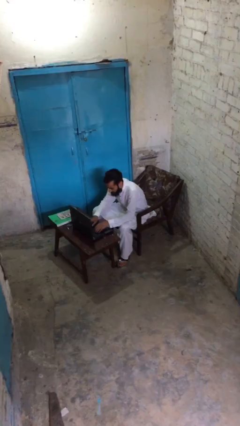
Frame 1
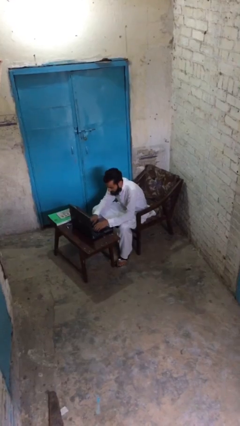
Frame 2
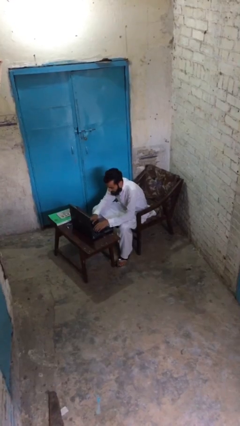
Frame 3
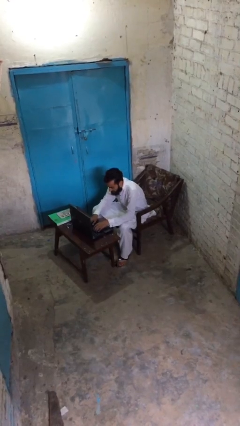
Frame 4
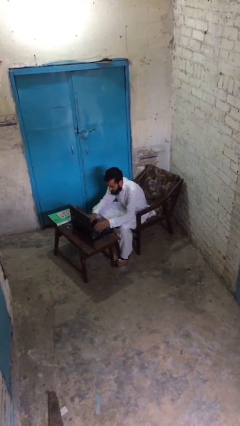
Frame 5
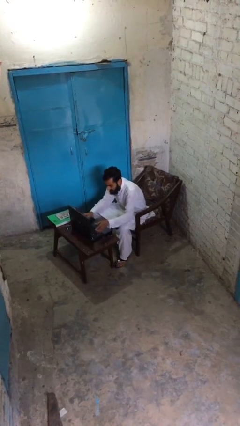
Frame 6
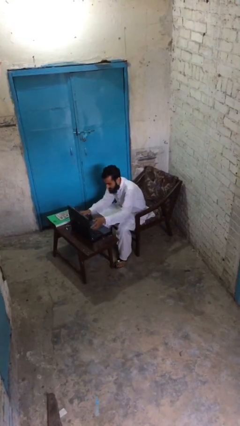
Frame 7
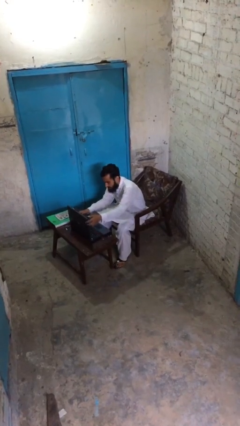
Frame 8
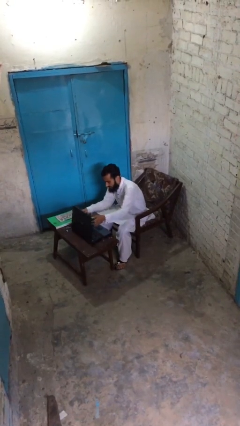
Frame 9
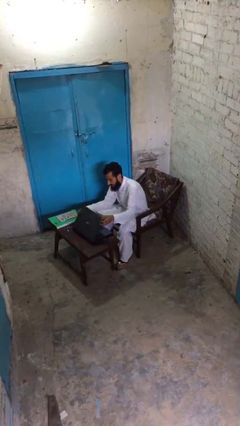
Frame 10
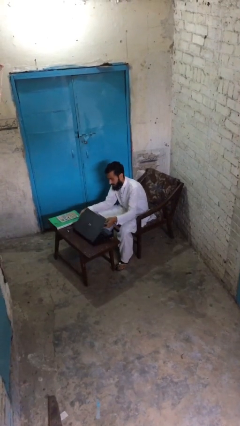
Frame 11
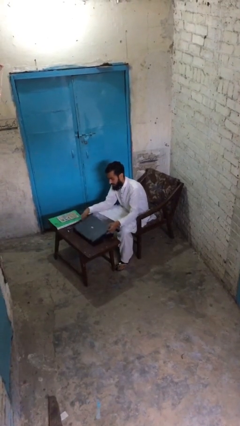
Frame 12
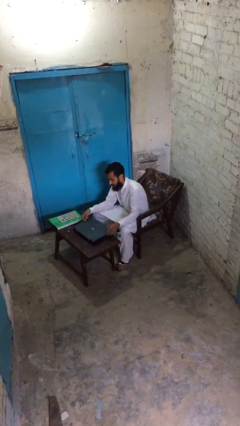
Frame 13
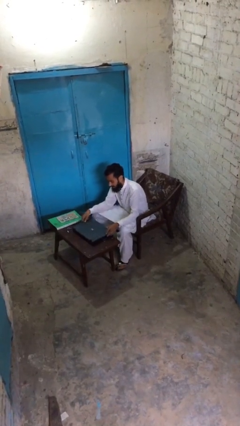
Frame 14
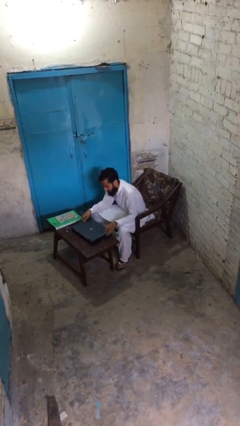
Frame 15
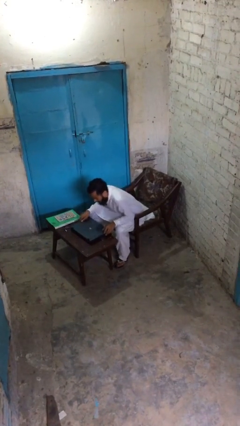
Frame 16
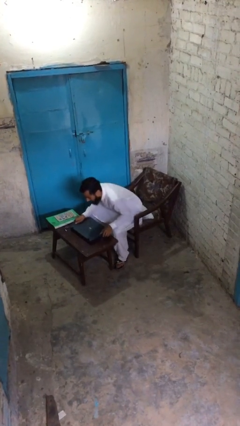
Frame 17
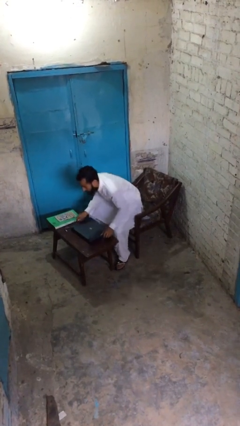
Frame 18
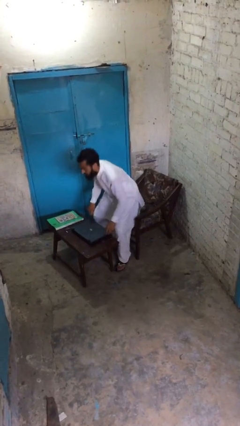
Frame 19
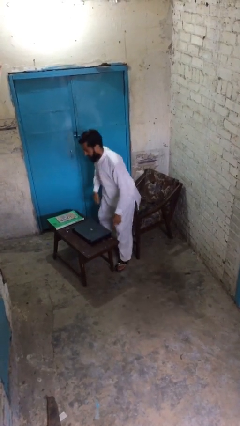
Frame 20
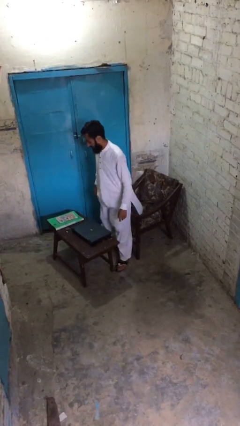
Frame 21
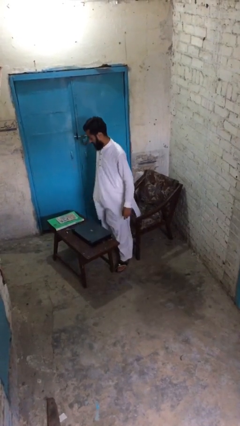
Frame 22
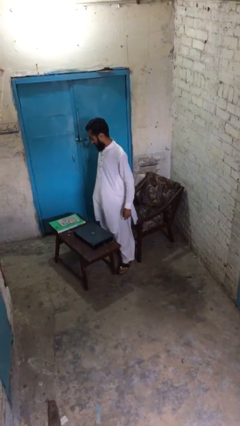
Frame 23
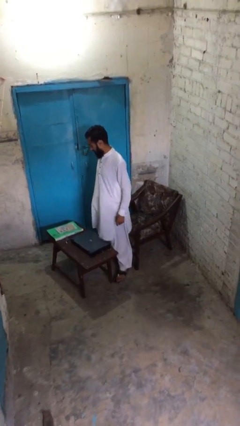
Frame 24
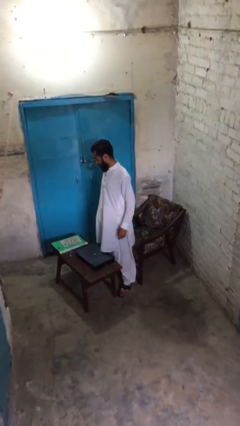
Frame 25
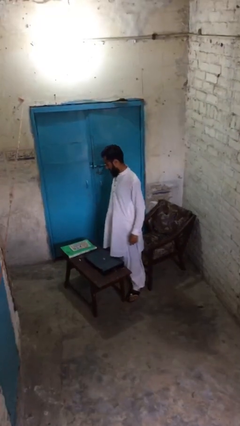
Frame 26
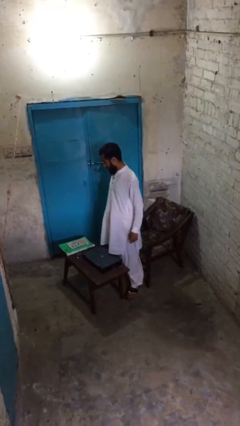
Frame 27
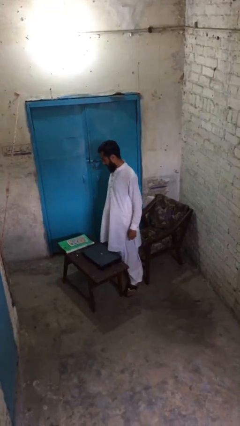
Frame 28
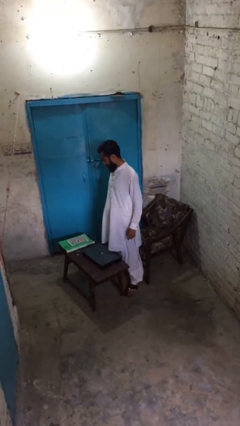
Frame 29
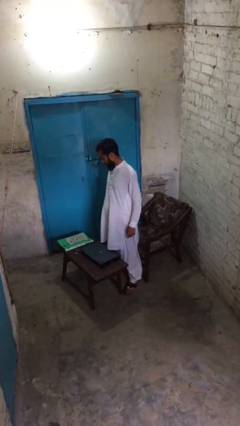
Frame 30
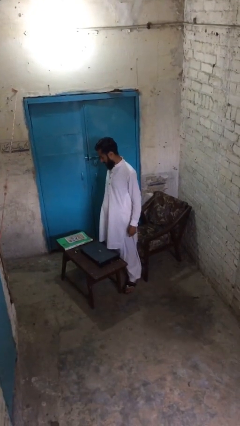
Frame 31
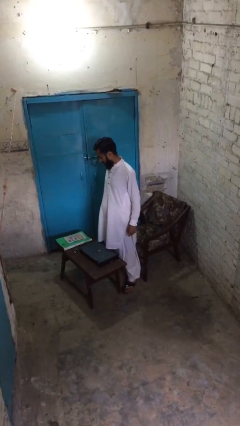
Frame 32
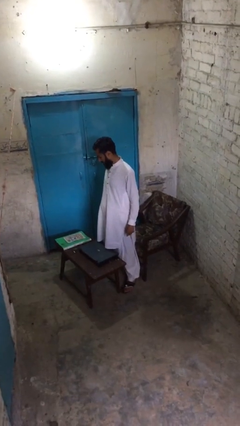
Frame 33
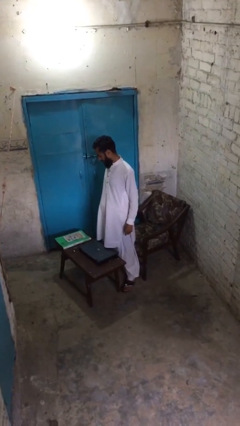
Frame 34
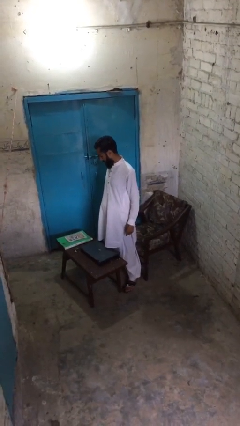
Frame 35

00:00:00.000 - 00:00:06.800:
person stands up

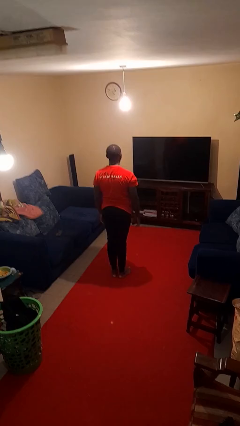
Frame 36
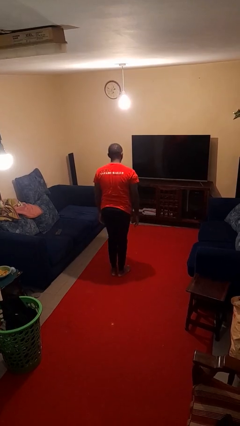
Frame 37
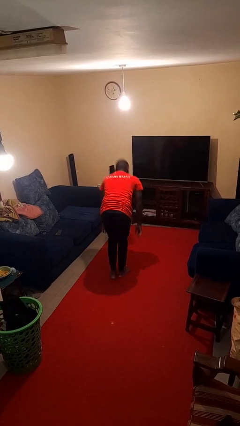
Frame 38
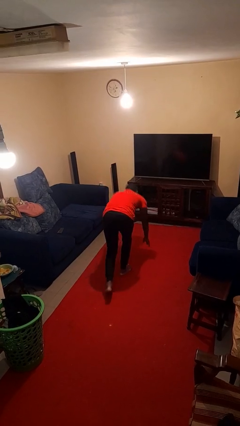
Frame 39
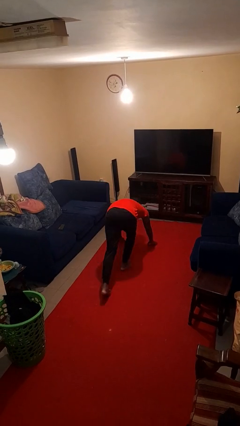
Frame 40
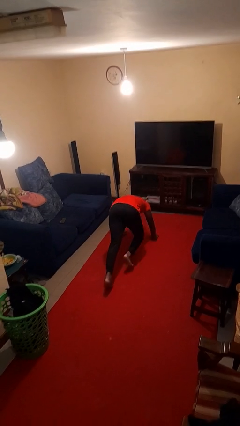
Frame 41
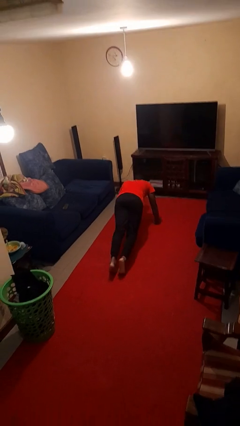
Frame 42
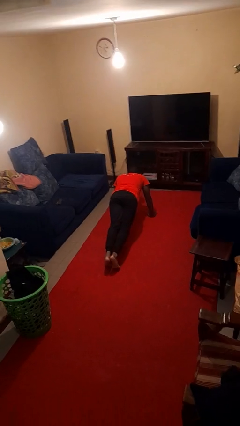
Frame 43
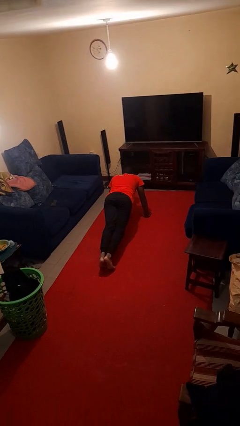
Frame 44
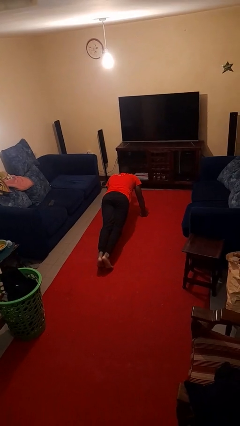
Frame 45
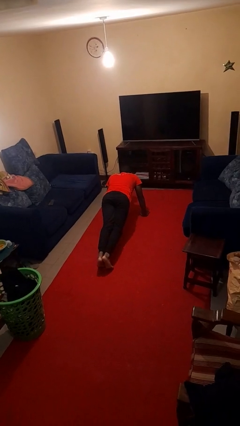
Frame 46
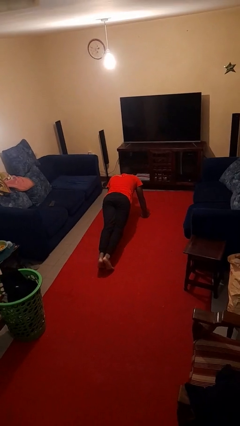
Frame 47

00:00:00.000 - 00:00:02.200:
person exercises with plank

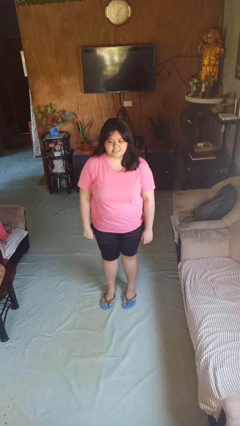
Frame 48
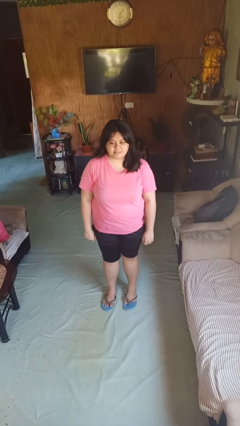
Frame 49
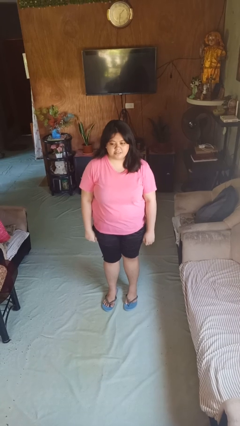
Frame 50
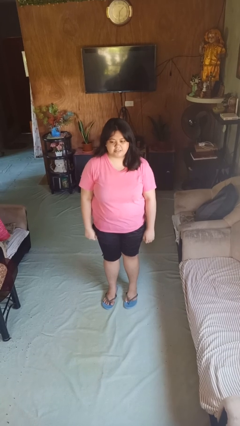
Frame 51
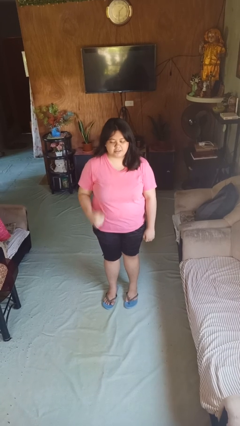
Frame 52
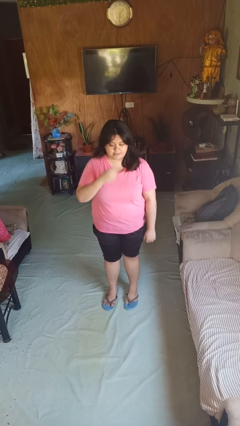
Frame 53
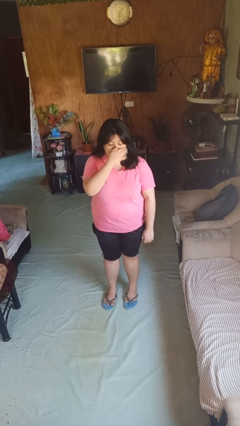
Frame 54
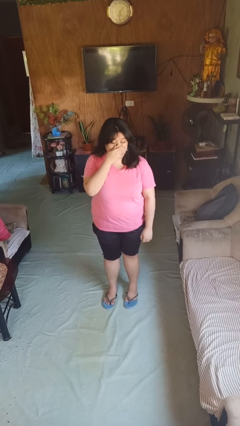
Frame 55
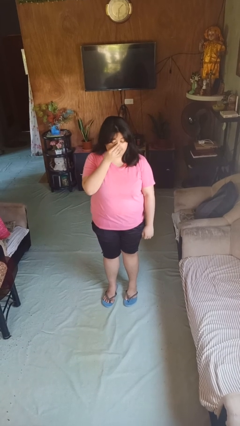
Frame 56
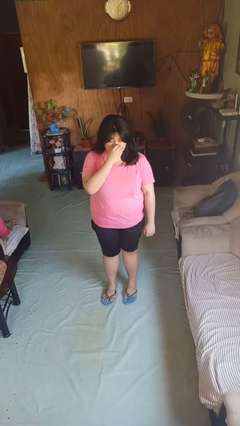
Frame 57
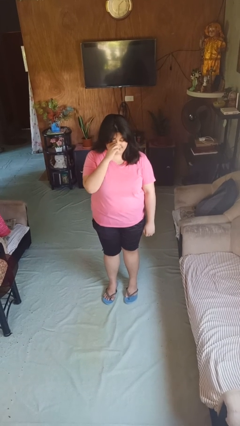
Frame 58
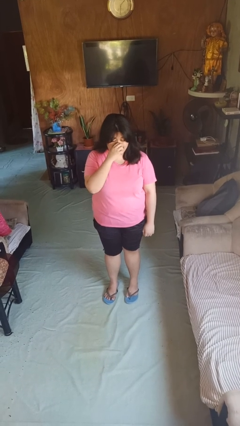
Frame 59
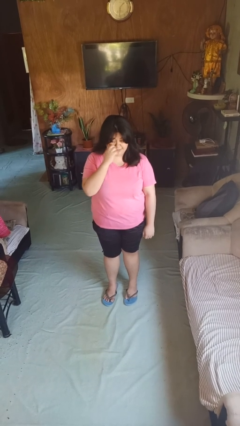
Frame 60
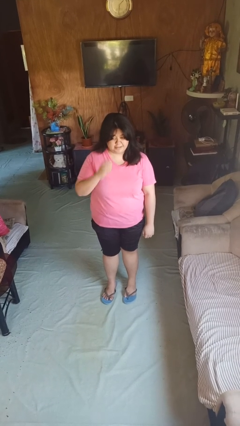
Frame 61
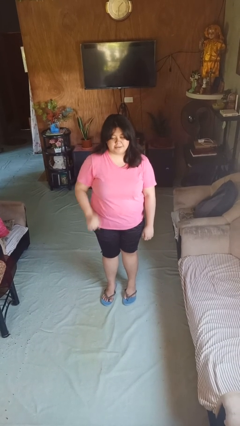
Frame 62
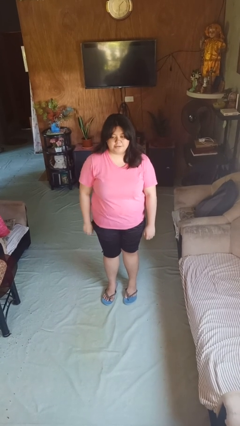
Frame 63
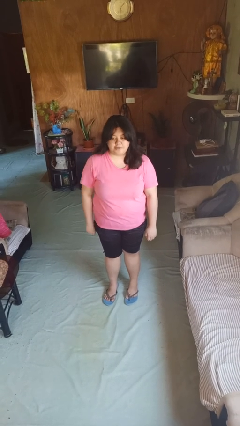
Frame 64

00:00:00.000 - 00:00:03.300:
person scratches face

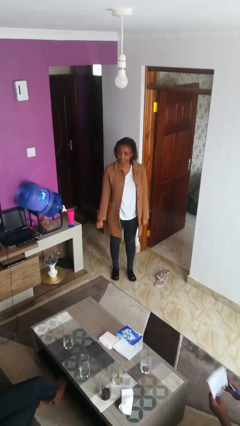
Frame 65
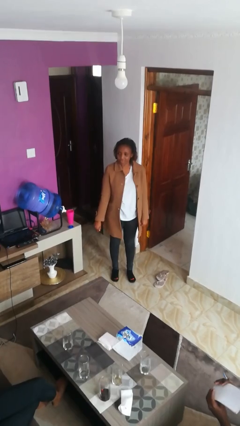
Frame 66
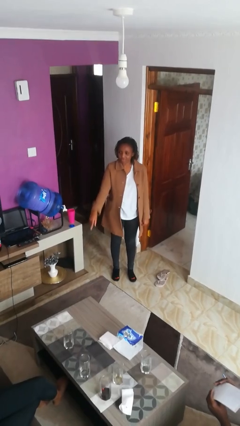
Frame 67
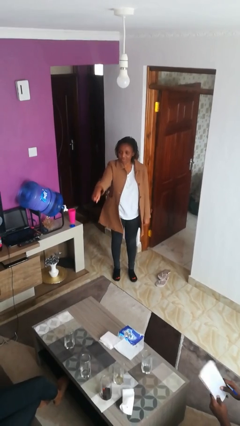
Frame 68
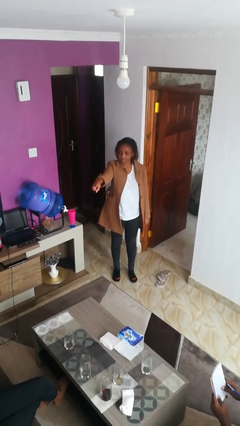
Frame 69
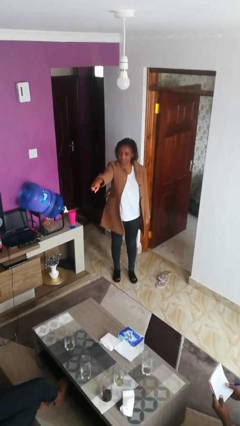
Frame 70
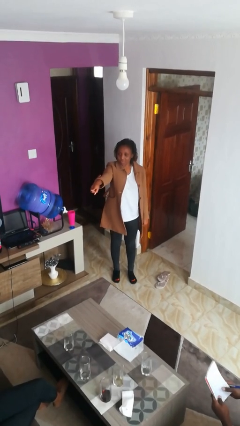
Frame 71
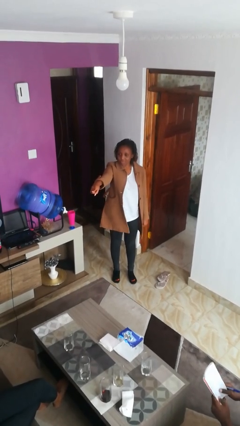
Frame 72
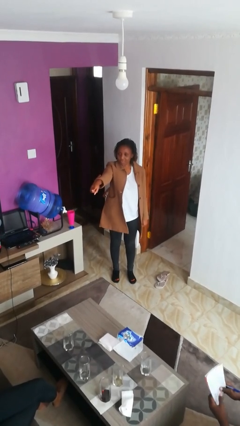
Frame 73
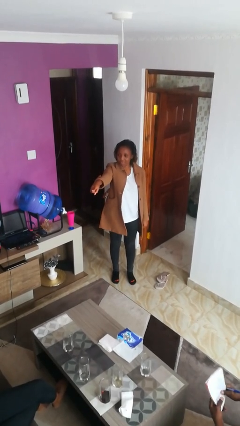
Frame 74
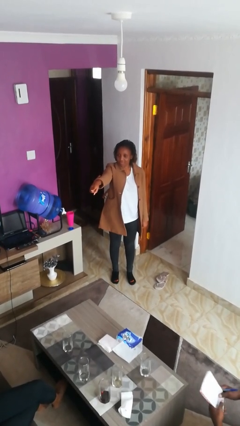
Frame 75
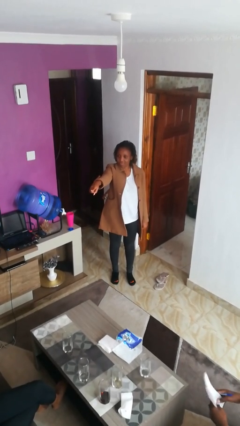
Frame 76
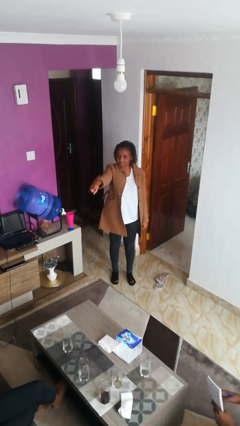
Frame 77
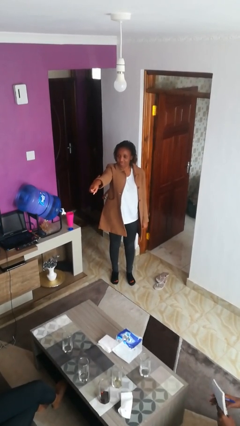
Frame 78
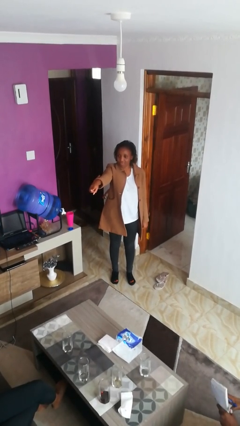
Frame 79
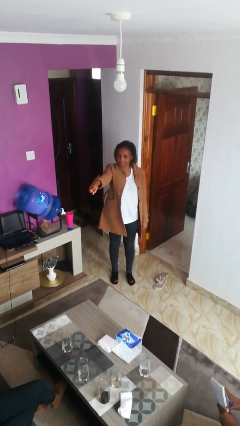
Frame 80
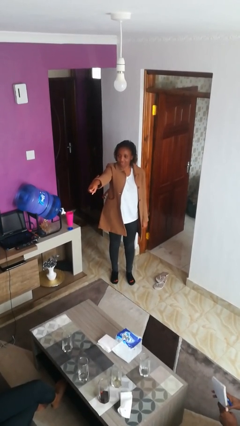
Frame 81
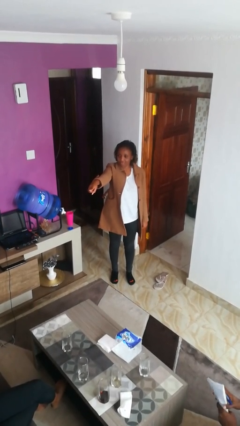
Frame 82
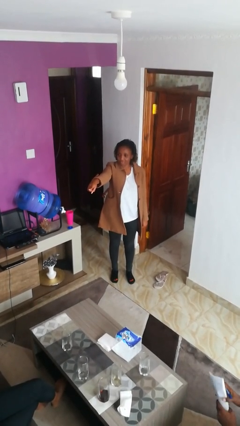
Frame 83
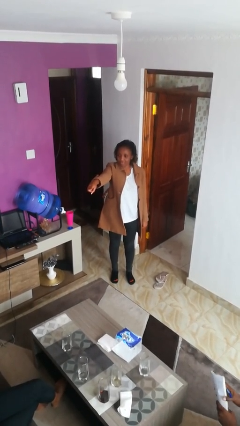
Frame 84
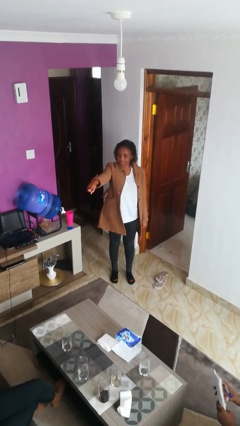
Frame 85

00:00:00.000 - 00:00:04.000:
person points at person

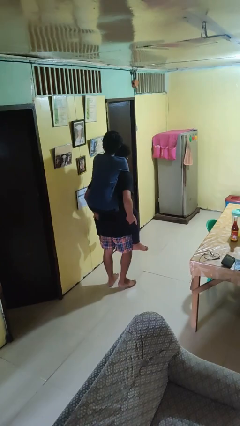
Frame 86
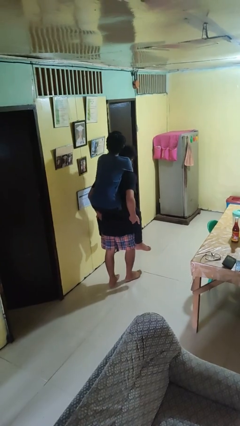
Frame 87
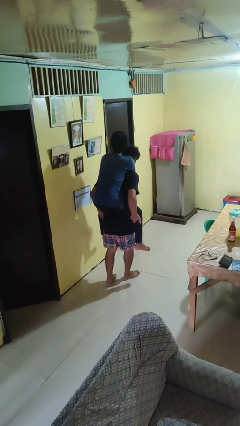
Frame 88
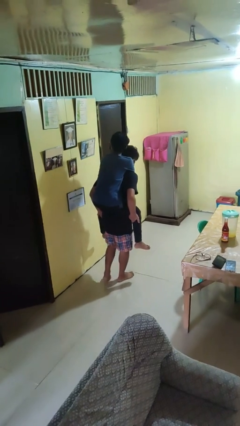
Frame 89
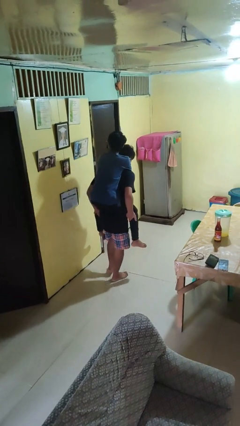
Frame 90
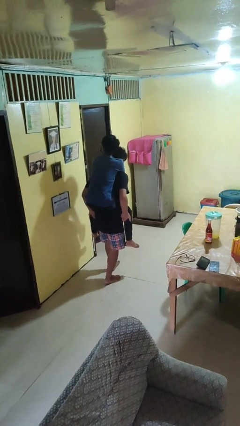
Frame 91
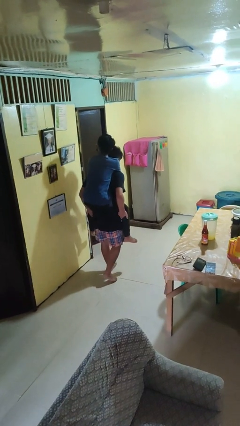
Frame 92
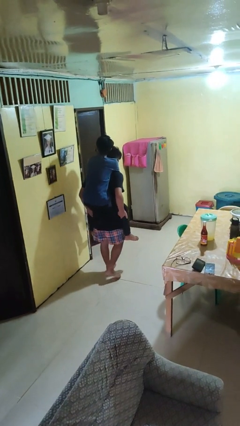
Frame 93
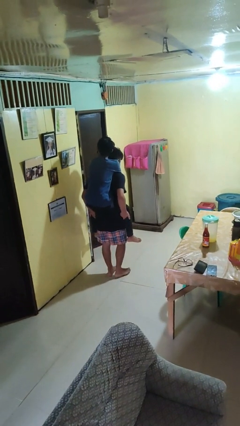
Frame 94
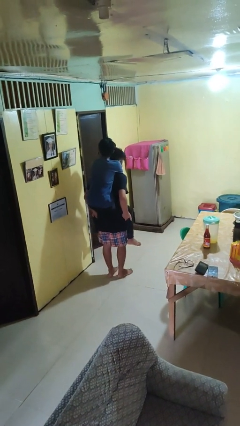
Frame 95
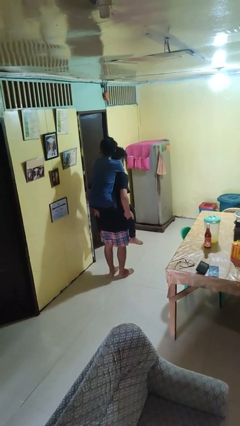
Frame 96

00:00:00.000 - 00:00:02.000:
person carries person on back
